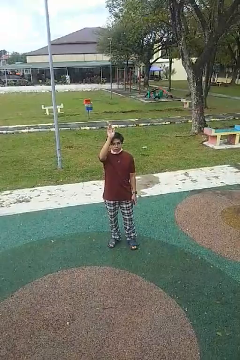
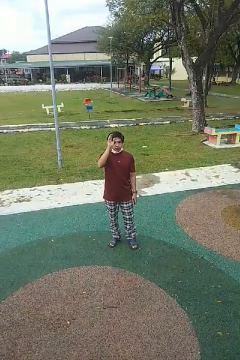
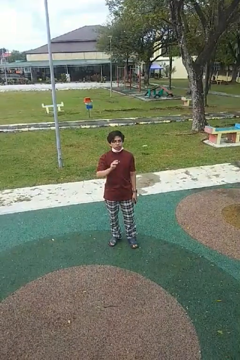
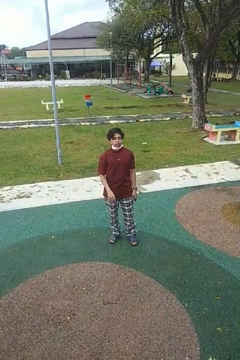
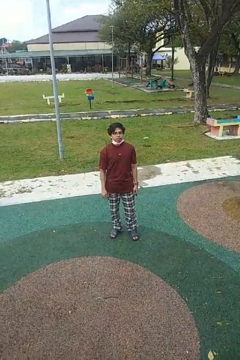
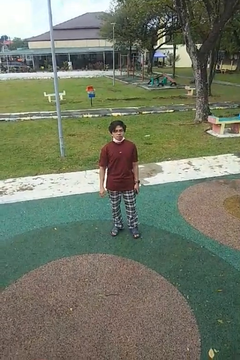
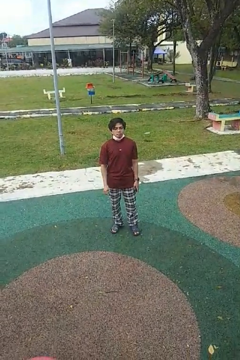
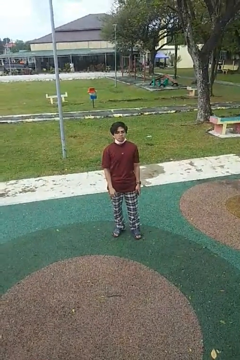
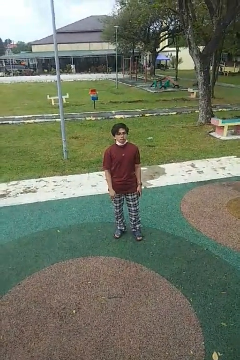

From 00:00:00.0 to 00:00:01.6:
person gestures lower hand

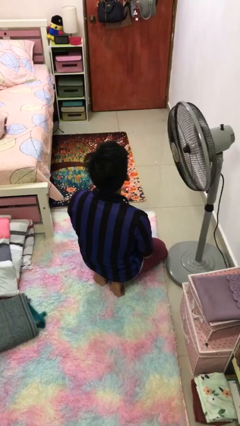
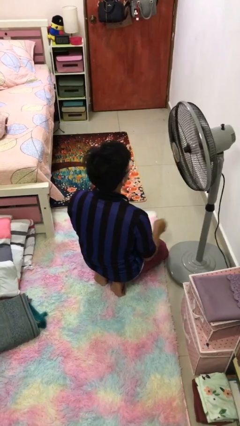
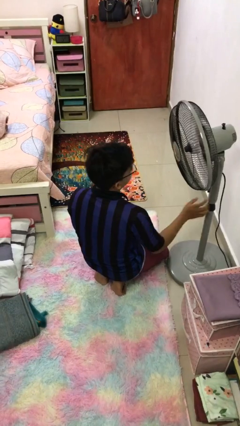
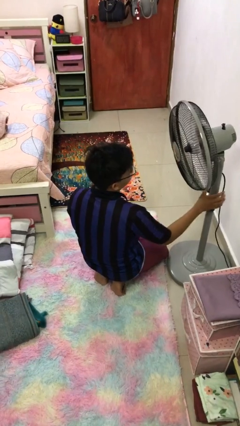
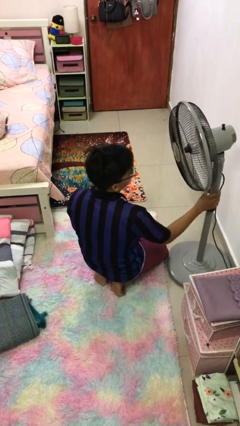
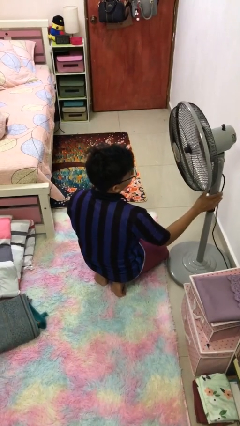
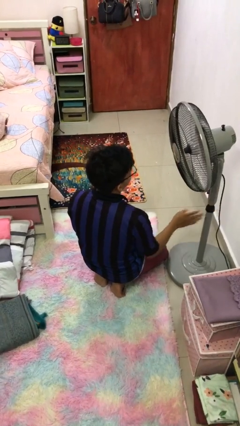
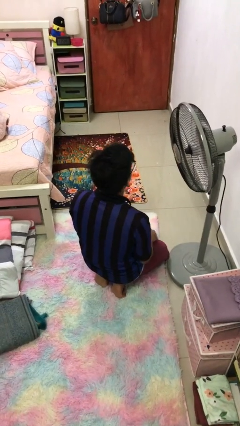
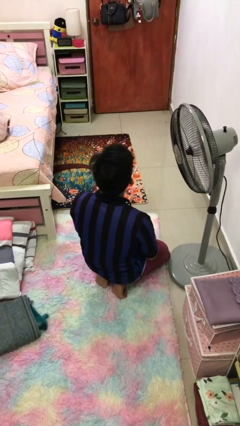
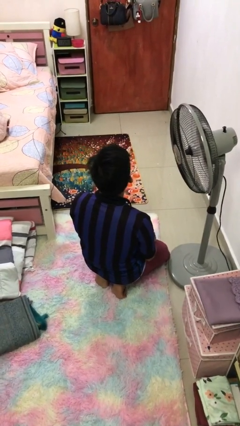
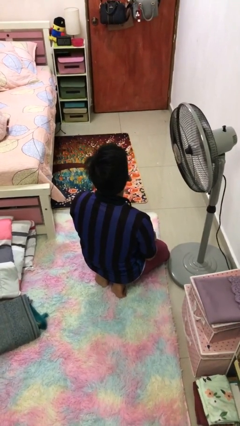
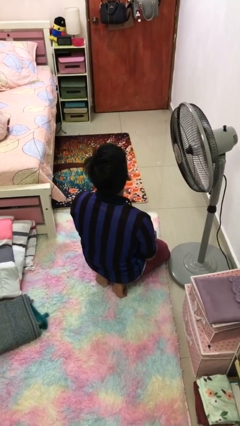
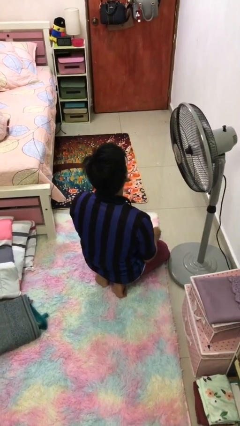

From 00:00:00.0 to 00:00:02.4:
person turns on fan

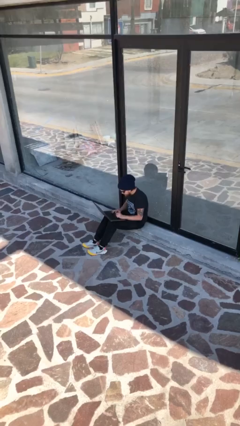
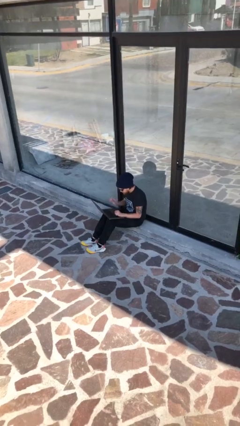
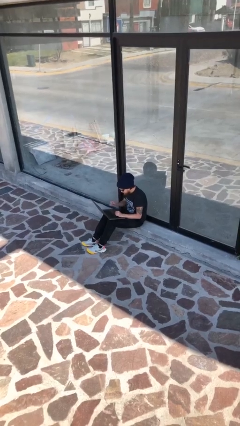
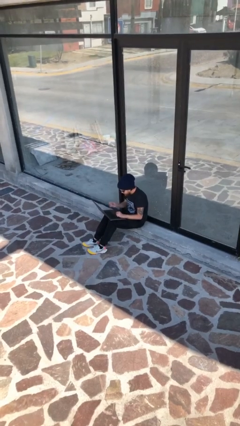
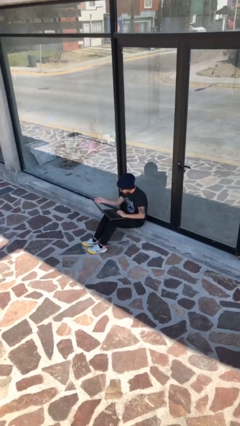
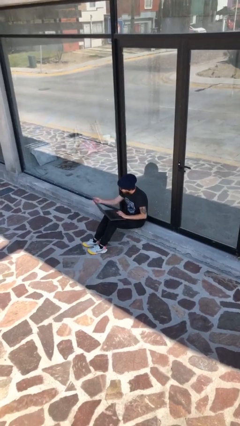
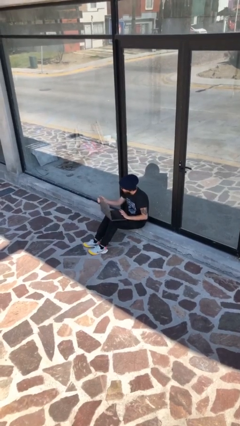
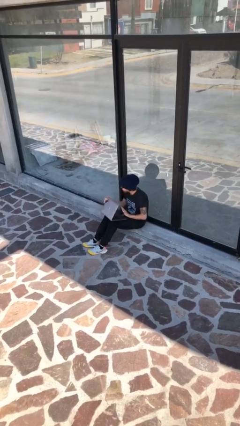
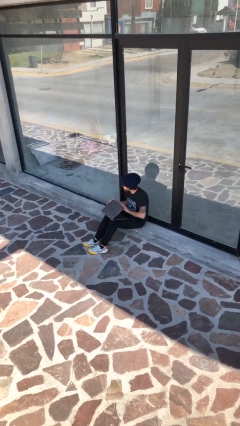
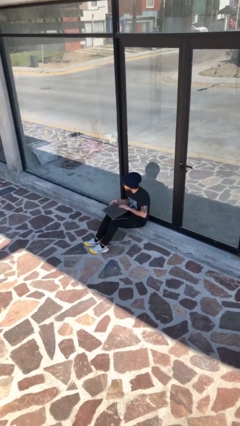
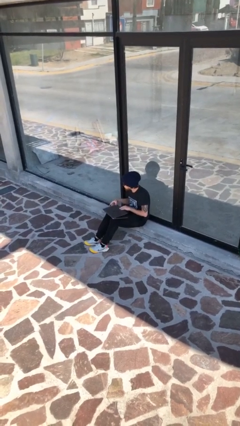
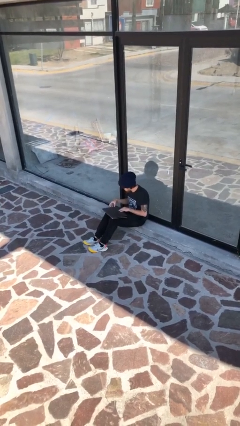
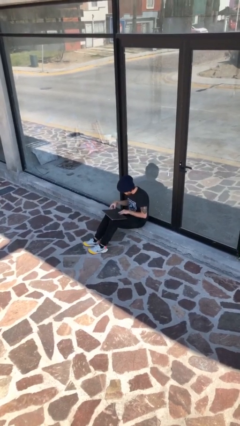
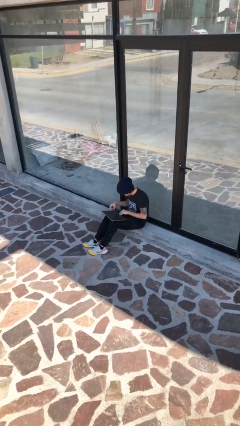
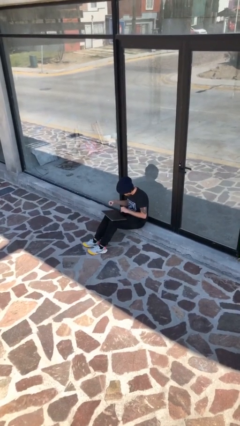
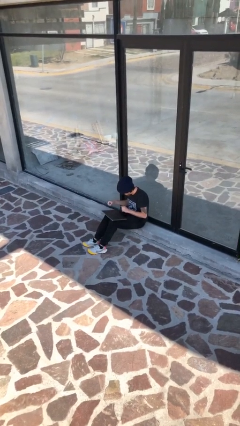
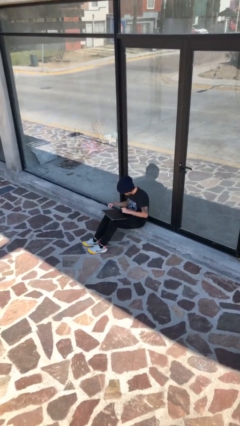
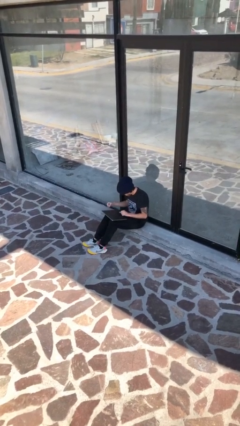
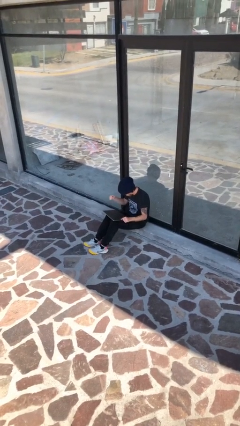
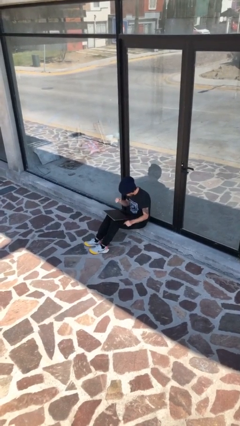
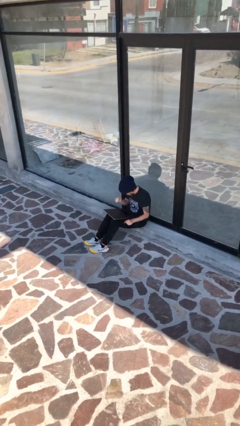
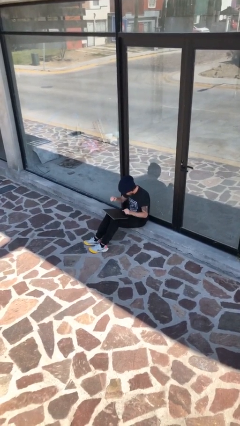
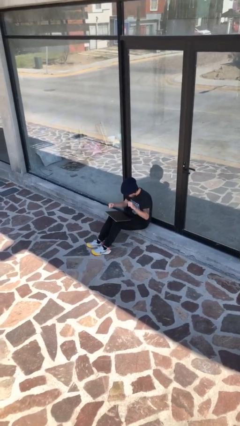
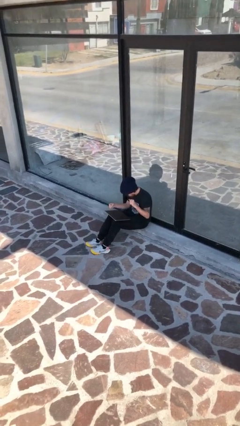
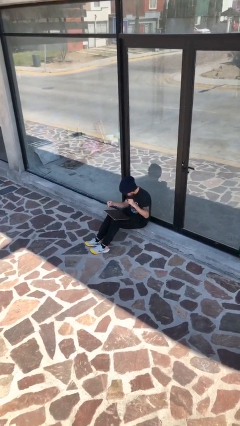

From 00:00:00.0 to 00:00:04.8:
person interacts with laptop

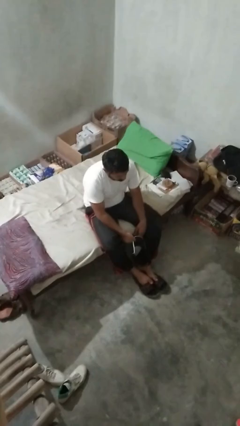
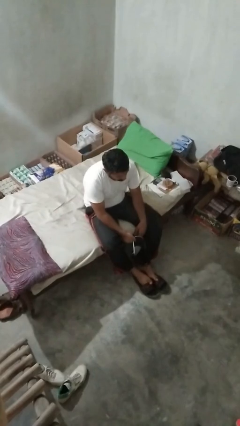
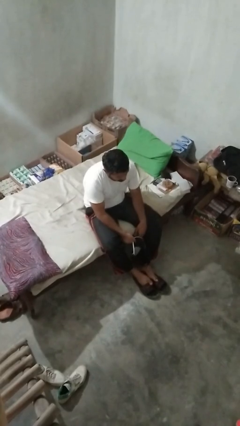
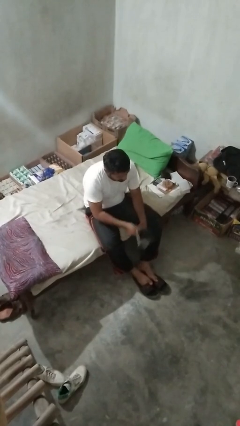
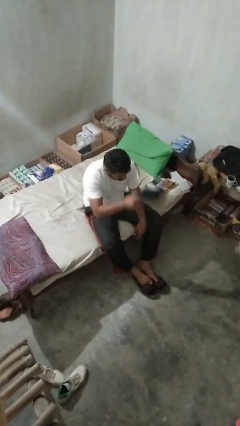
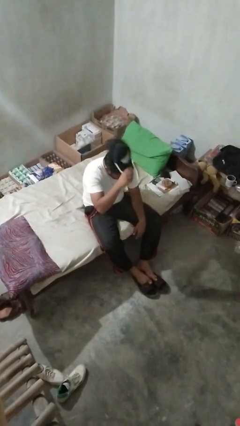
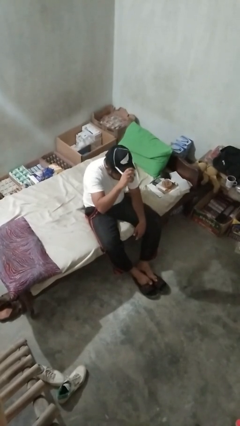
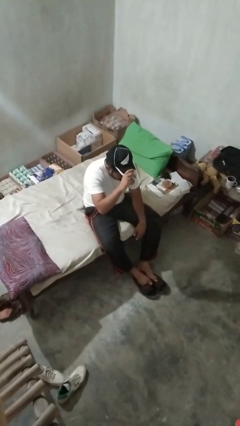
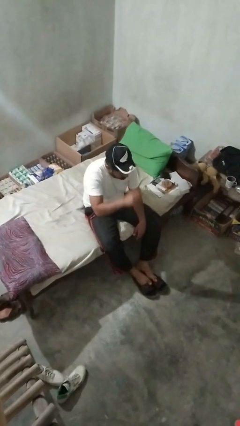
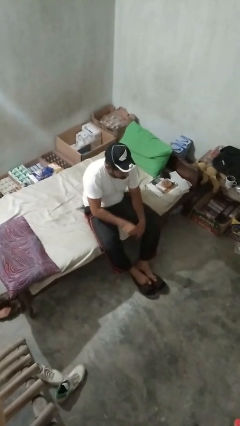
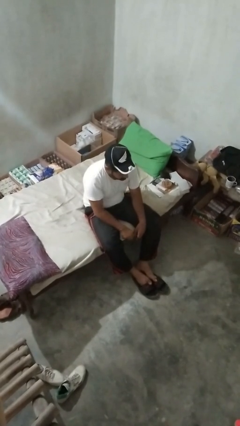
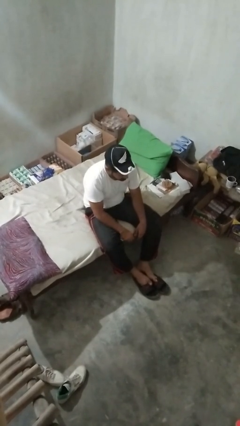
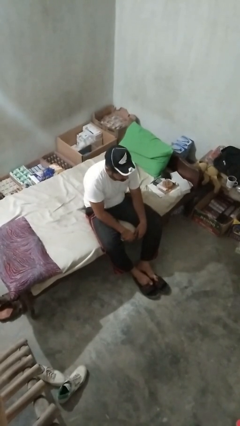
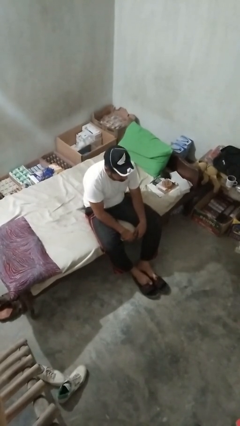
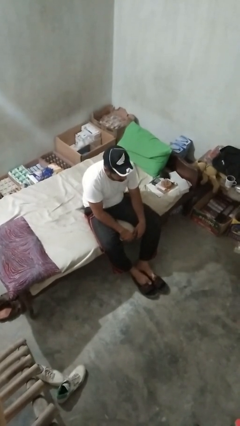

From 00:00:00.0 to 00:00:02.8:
person puts on hat

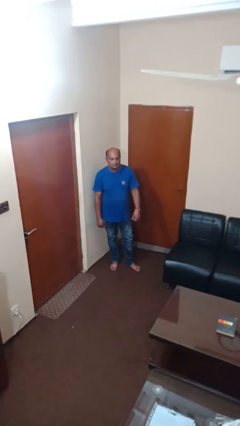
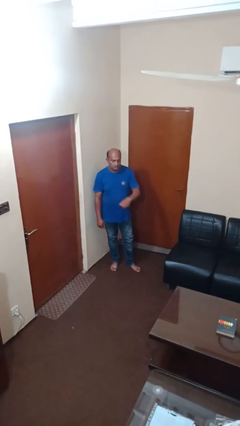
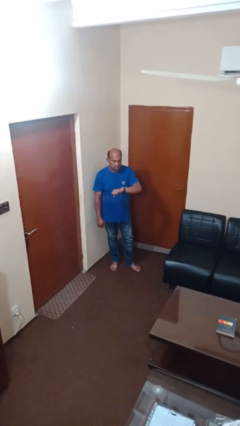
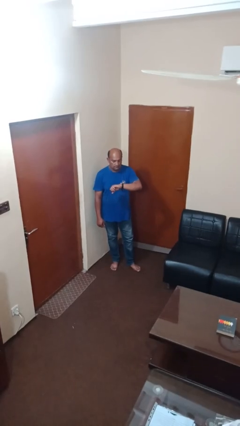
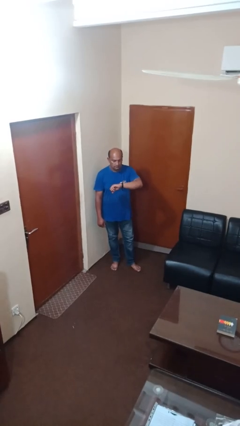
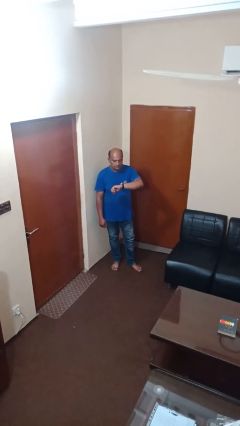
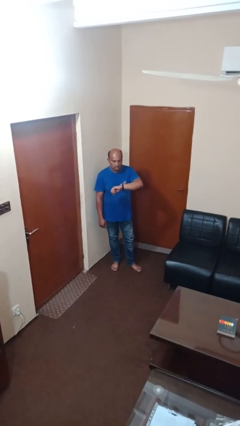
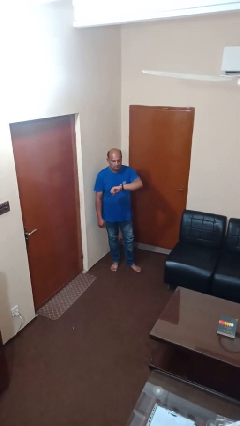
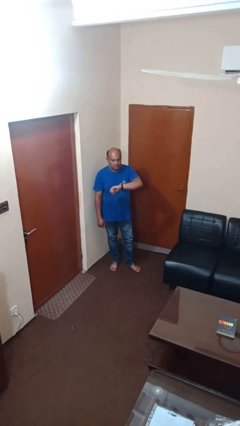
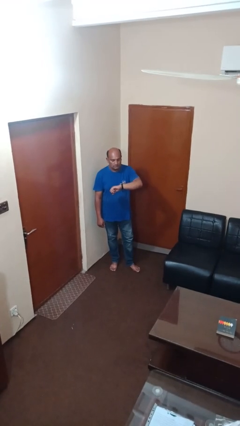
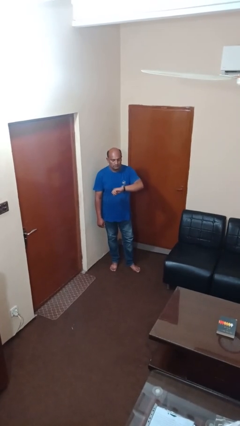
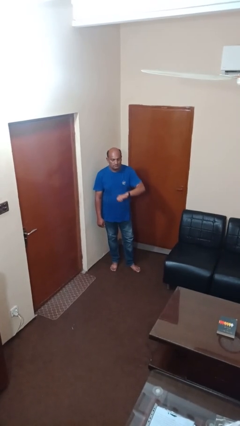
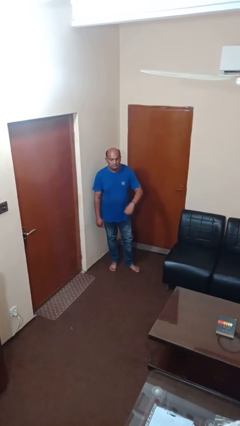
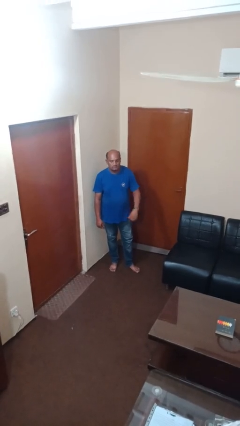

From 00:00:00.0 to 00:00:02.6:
person looks at wristwatch

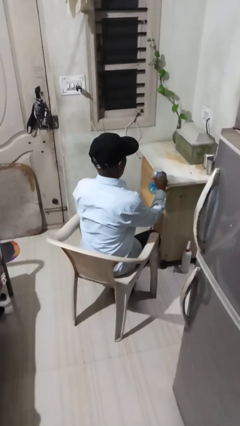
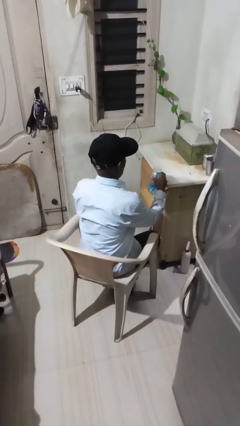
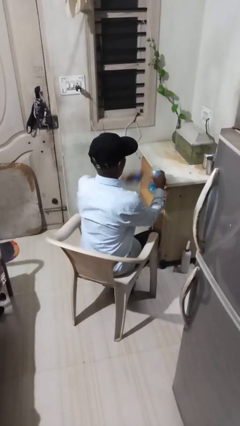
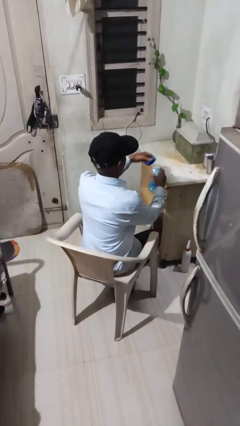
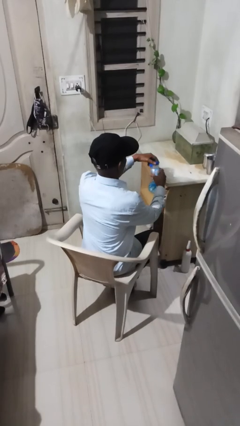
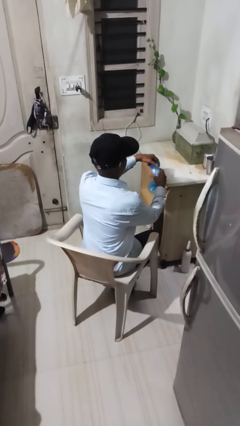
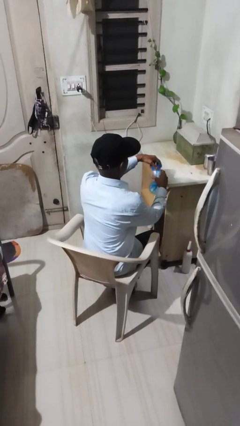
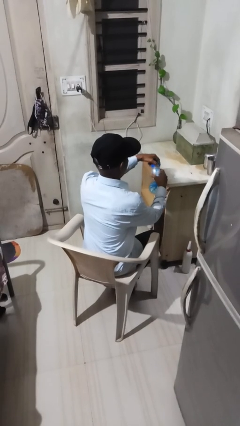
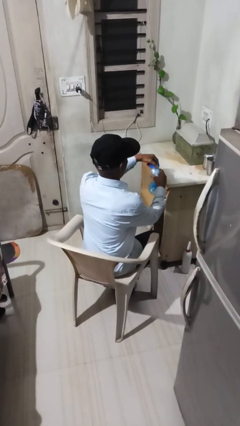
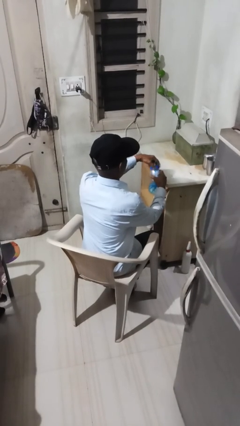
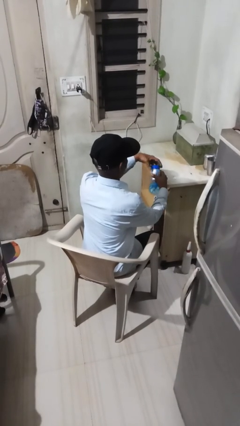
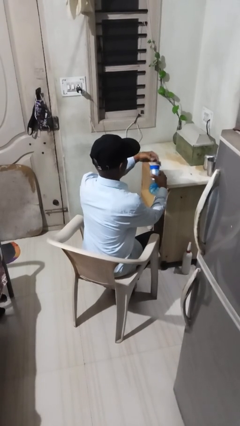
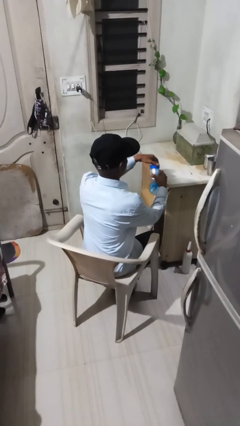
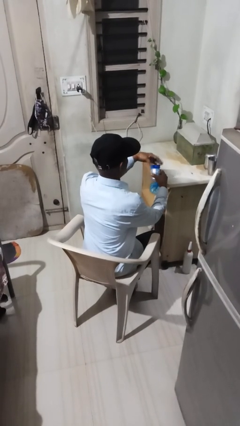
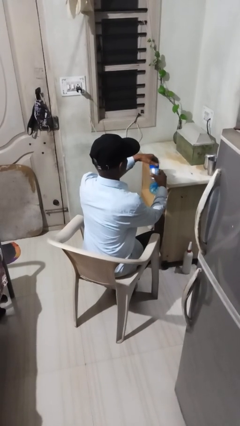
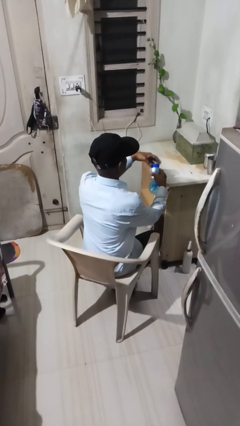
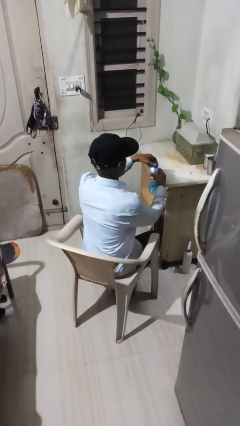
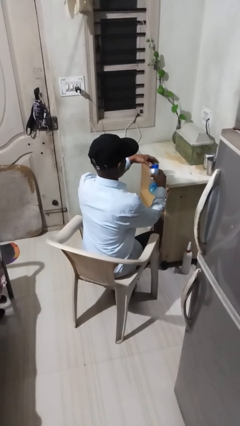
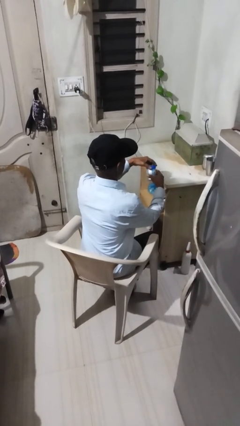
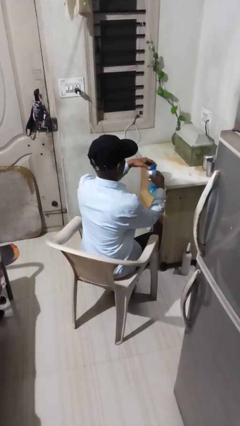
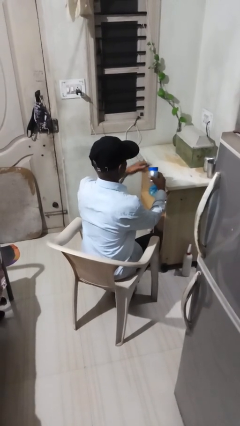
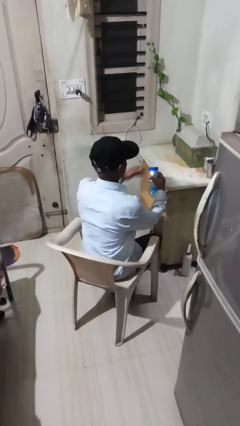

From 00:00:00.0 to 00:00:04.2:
person closes jar
